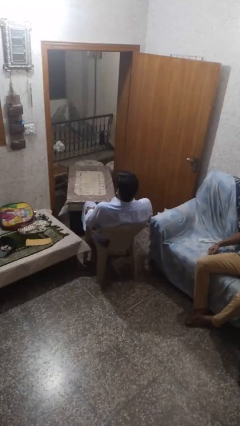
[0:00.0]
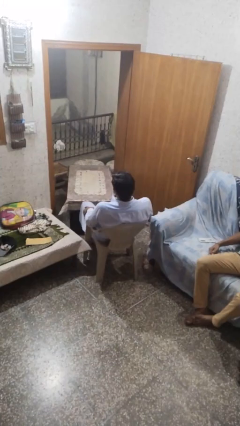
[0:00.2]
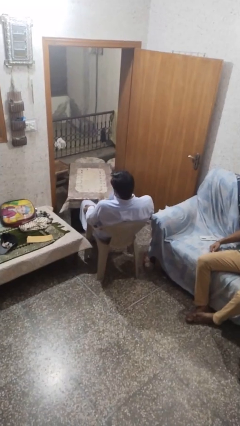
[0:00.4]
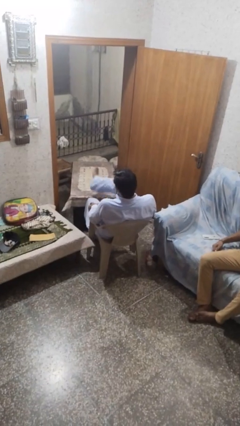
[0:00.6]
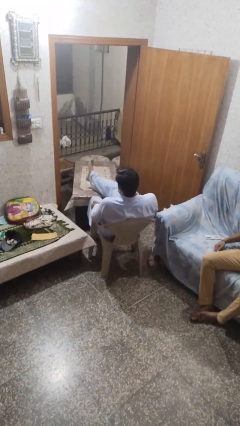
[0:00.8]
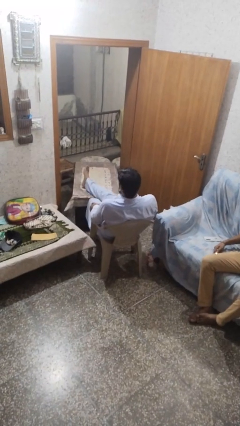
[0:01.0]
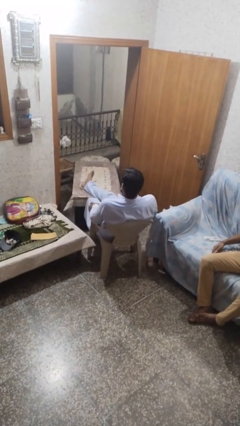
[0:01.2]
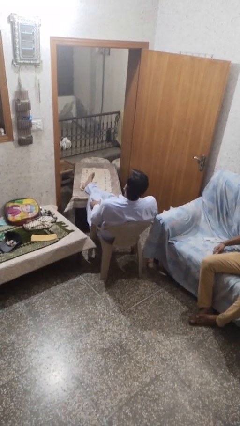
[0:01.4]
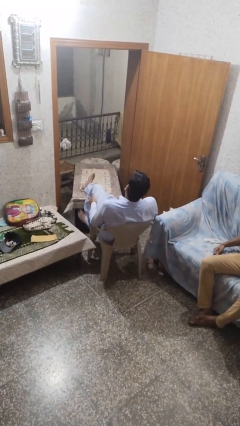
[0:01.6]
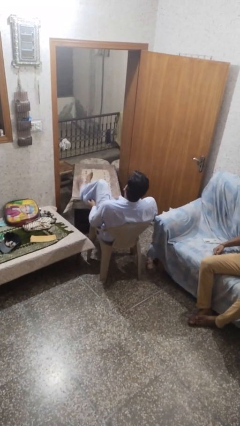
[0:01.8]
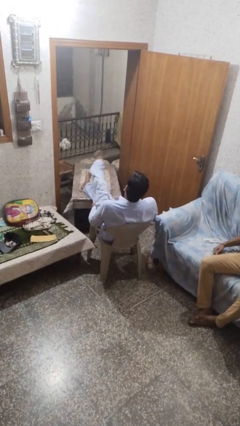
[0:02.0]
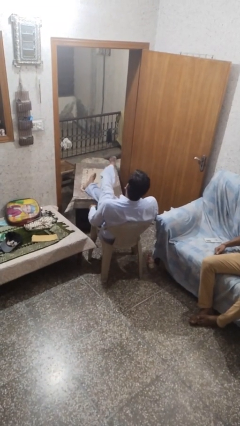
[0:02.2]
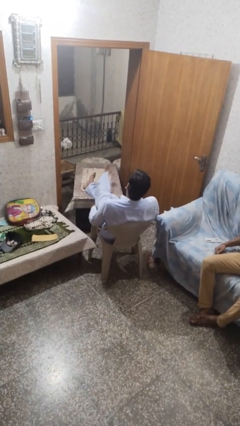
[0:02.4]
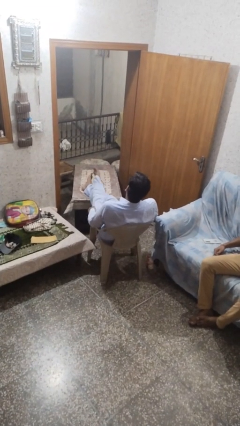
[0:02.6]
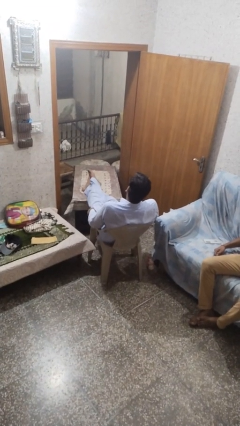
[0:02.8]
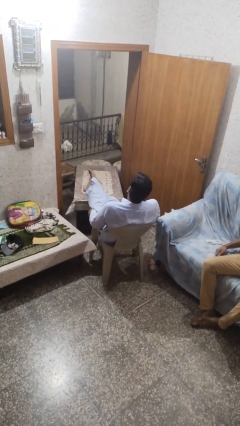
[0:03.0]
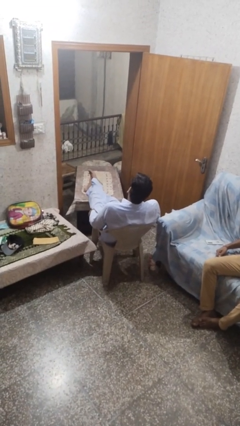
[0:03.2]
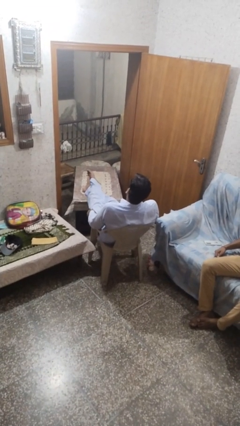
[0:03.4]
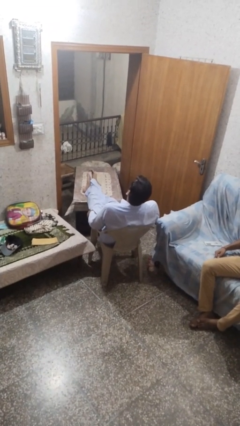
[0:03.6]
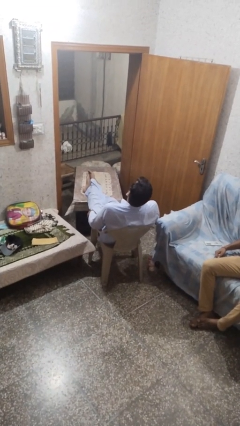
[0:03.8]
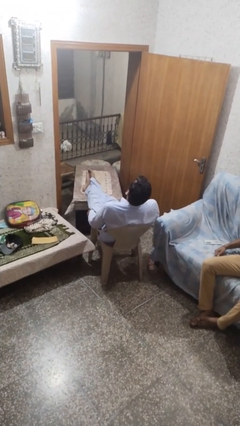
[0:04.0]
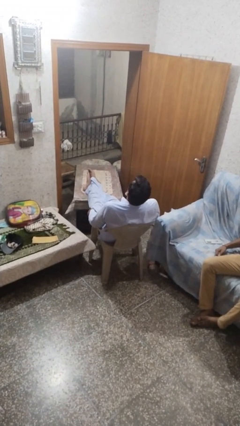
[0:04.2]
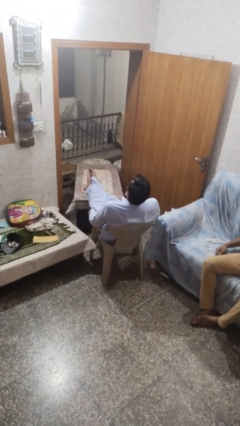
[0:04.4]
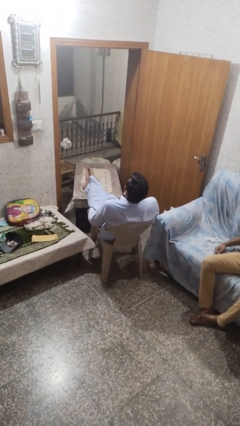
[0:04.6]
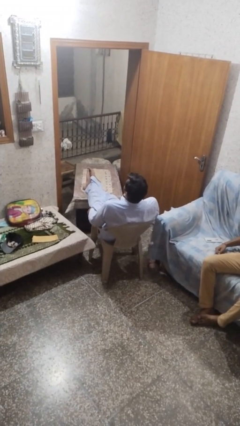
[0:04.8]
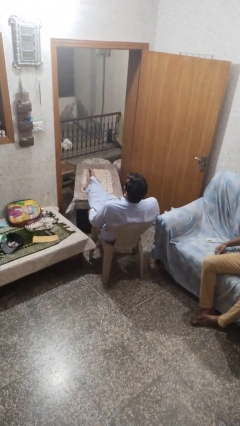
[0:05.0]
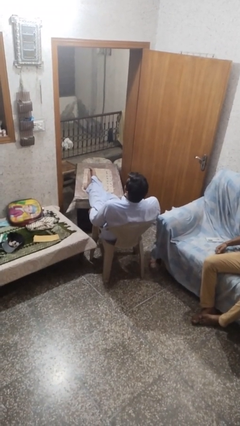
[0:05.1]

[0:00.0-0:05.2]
person puts feet up

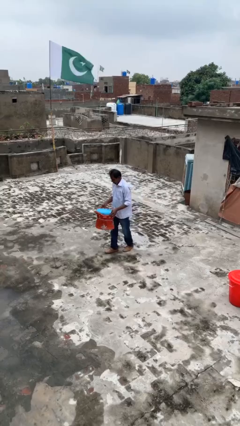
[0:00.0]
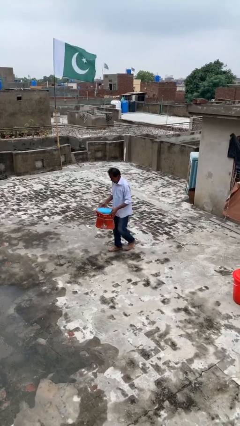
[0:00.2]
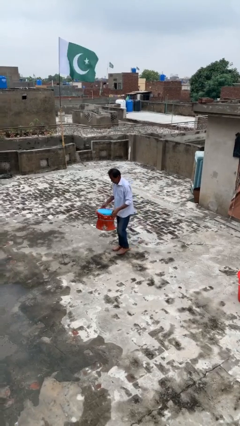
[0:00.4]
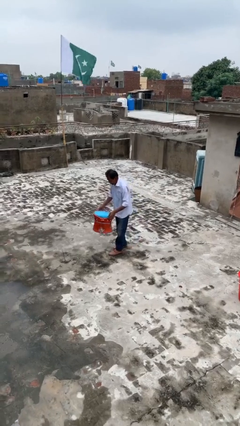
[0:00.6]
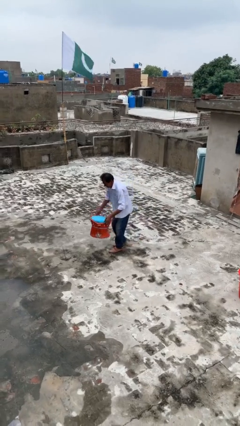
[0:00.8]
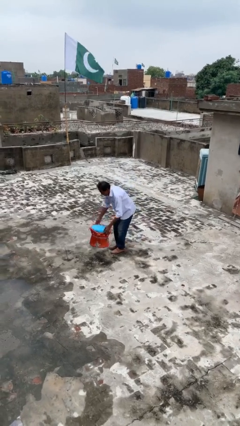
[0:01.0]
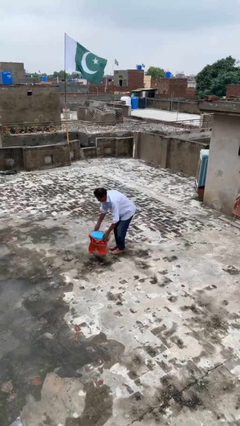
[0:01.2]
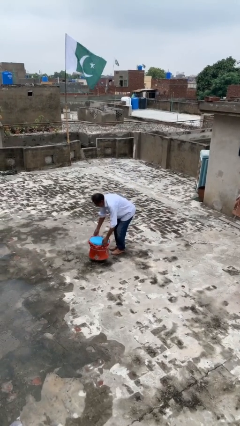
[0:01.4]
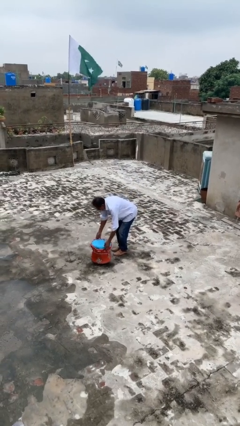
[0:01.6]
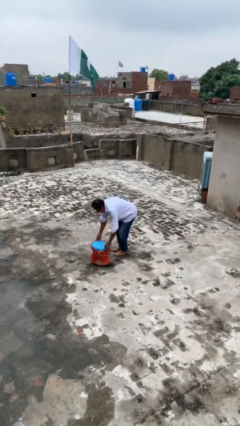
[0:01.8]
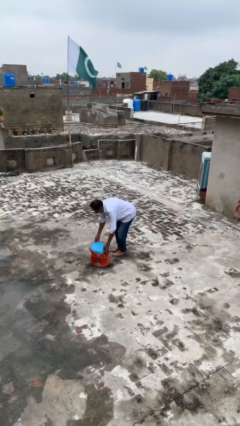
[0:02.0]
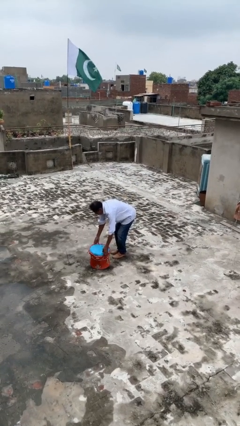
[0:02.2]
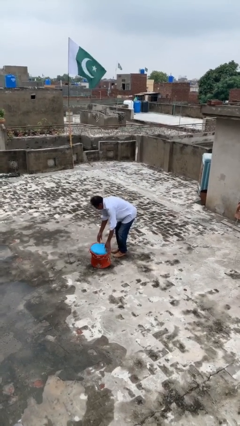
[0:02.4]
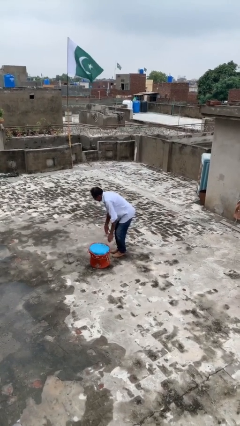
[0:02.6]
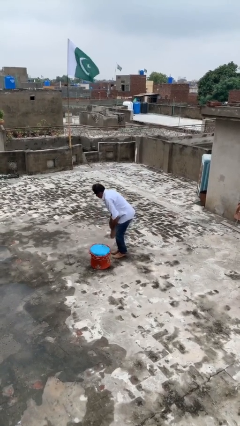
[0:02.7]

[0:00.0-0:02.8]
person puts down object on floor

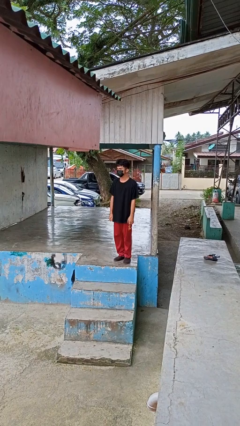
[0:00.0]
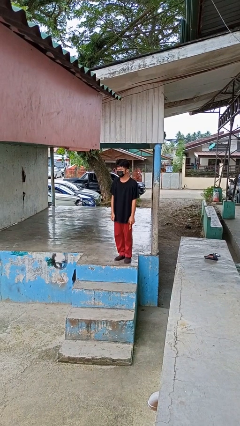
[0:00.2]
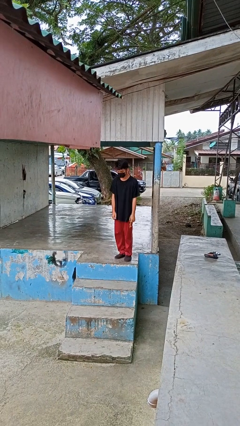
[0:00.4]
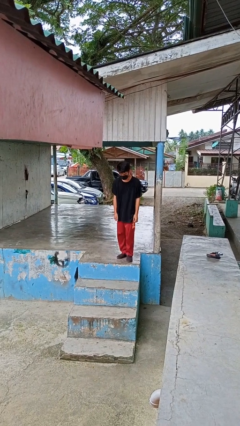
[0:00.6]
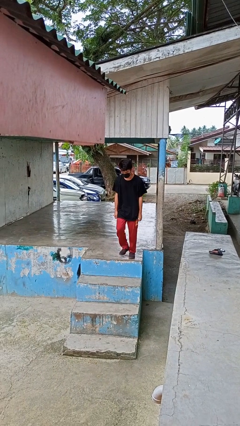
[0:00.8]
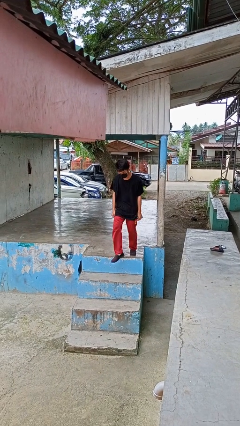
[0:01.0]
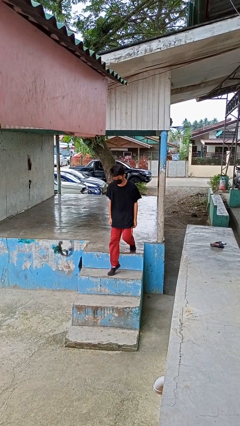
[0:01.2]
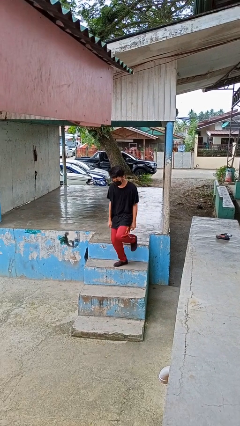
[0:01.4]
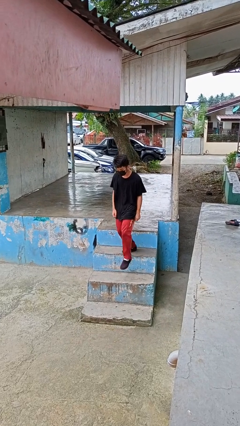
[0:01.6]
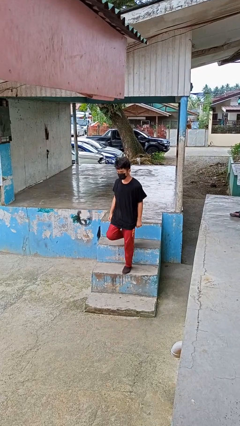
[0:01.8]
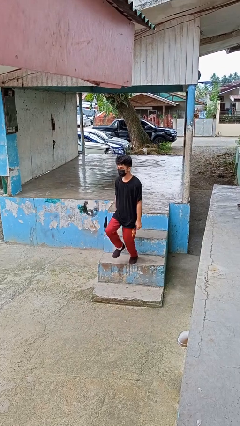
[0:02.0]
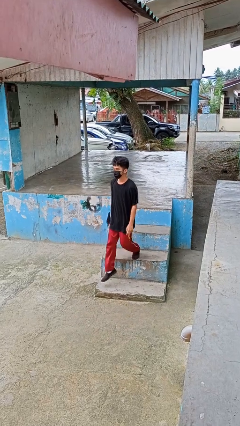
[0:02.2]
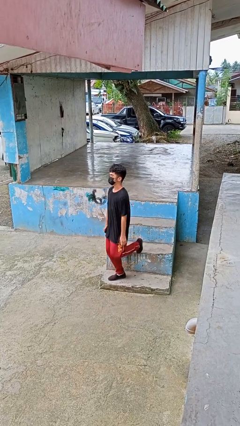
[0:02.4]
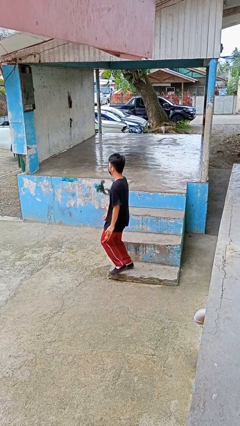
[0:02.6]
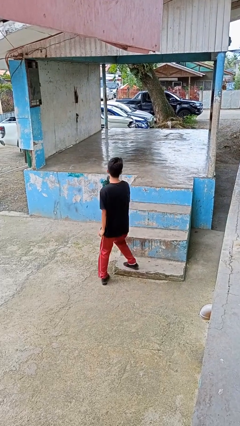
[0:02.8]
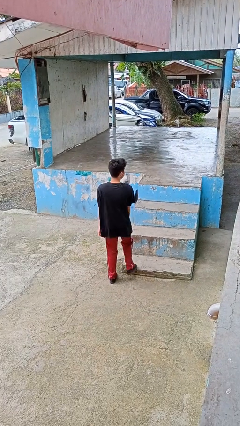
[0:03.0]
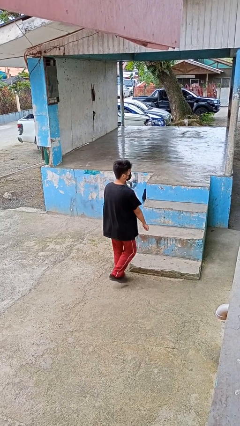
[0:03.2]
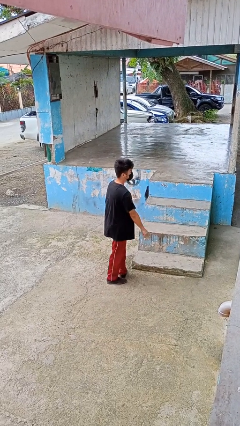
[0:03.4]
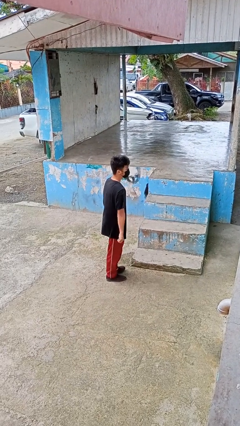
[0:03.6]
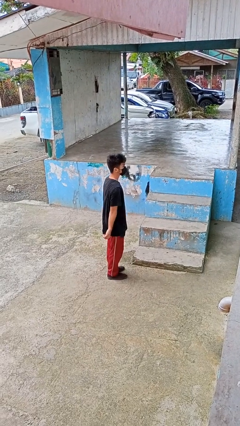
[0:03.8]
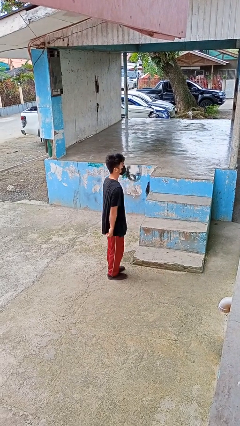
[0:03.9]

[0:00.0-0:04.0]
person climbs down stairs

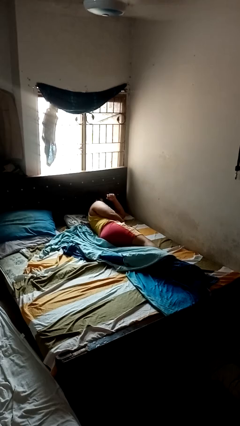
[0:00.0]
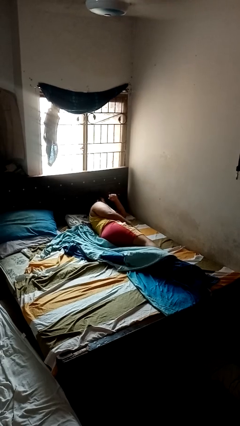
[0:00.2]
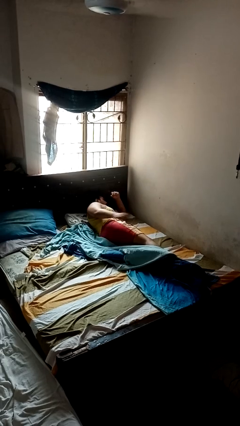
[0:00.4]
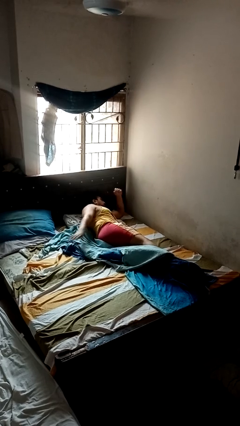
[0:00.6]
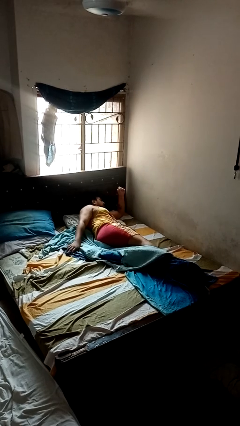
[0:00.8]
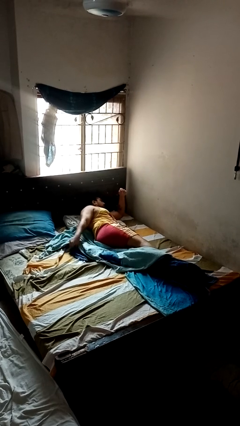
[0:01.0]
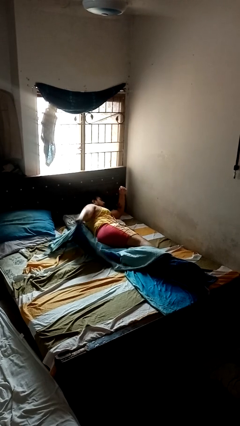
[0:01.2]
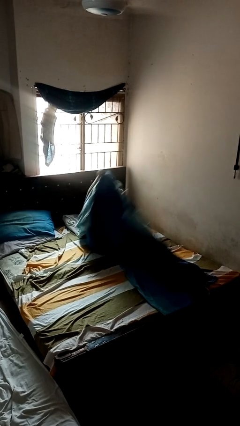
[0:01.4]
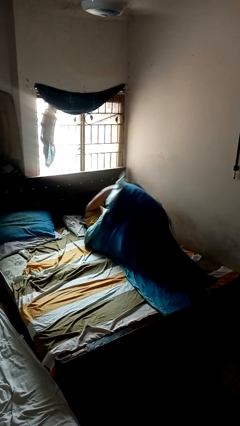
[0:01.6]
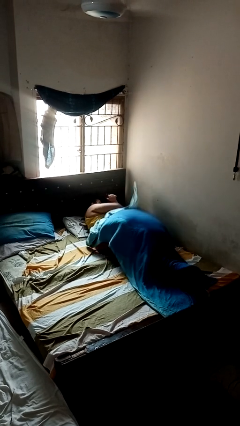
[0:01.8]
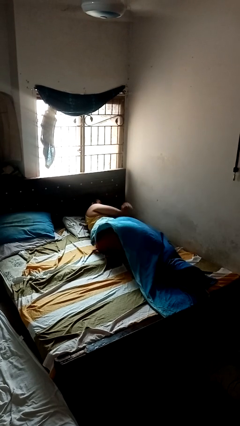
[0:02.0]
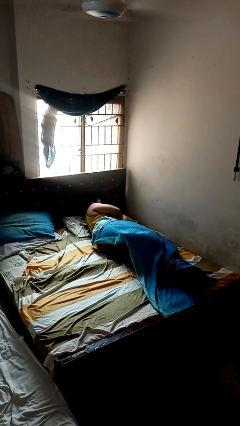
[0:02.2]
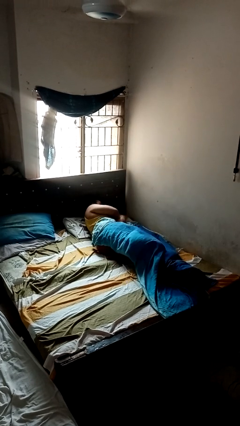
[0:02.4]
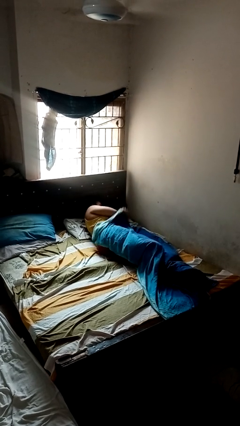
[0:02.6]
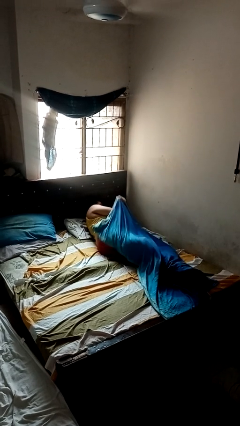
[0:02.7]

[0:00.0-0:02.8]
person covers with blanket

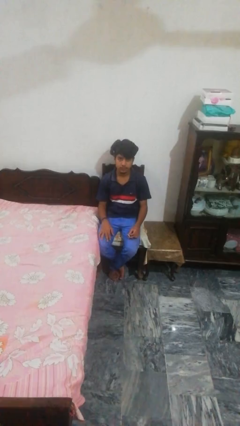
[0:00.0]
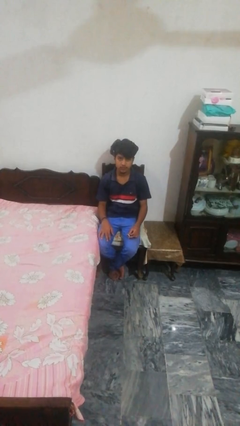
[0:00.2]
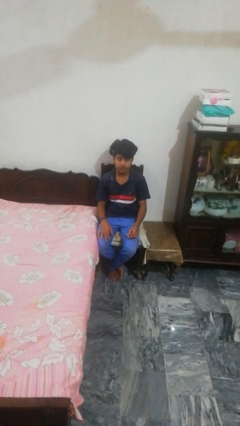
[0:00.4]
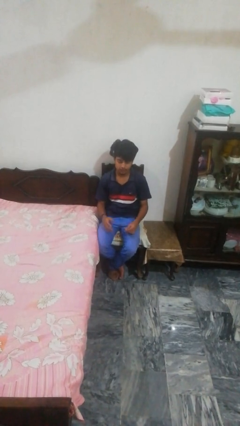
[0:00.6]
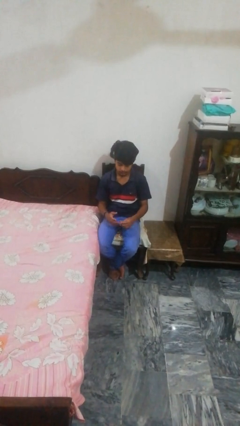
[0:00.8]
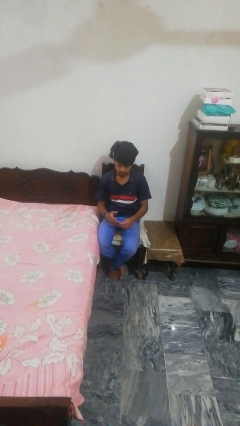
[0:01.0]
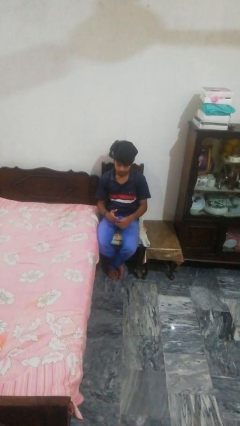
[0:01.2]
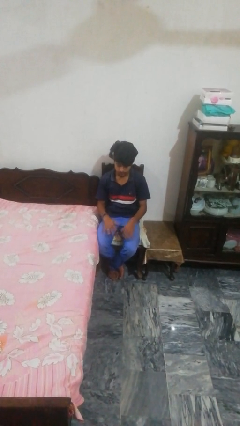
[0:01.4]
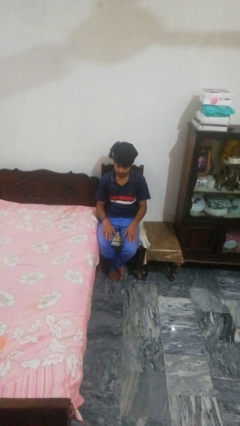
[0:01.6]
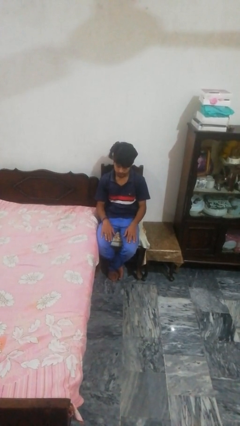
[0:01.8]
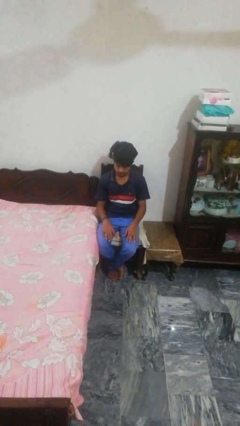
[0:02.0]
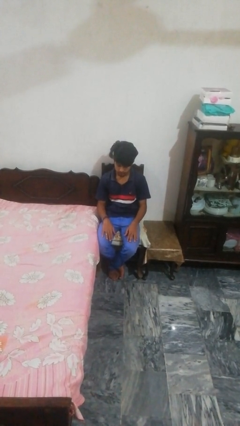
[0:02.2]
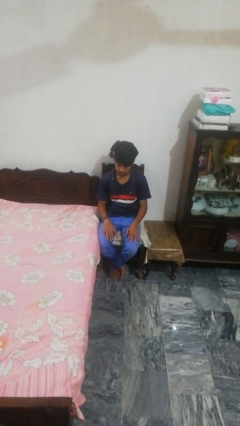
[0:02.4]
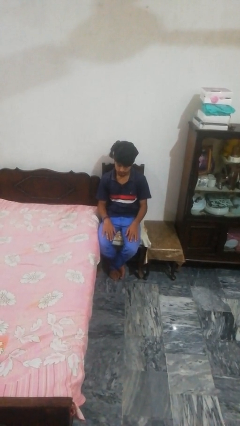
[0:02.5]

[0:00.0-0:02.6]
person puts on ring

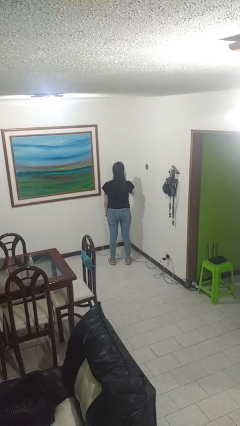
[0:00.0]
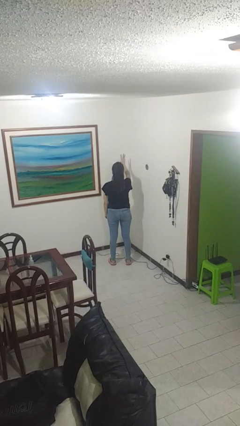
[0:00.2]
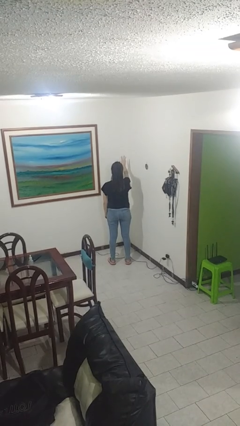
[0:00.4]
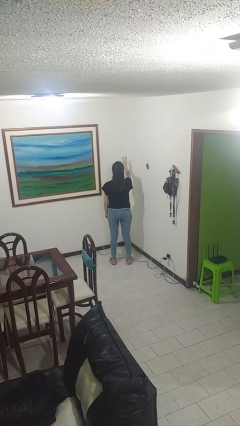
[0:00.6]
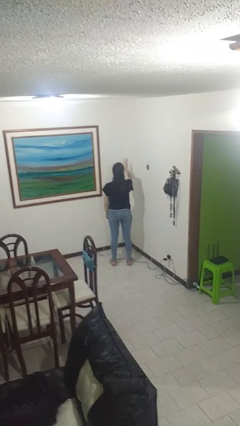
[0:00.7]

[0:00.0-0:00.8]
person gestures number three
